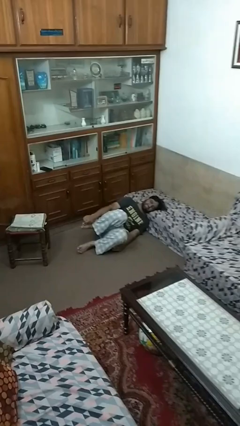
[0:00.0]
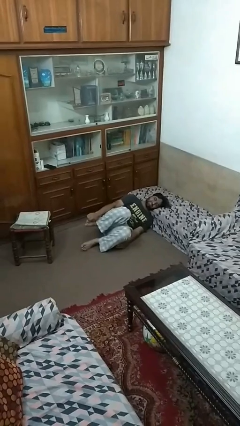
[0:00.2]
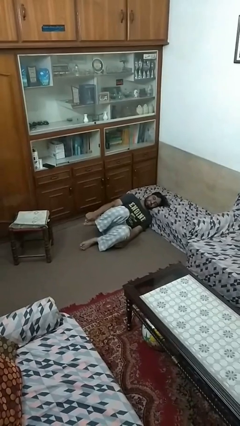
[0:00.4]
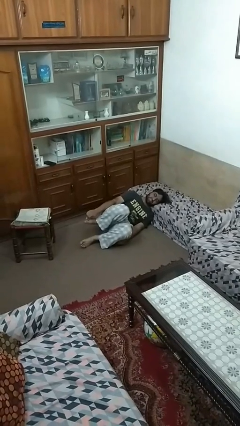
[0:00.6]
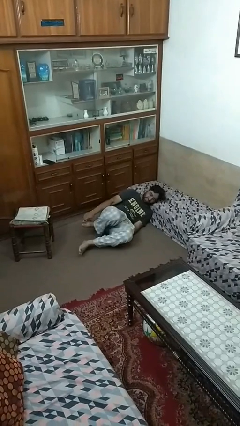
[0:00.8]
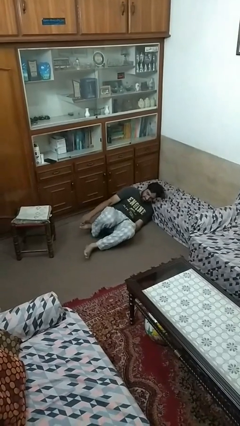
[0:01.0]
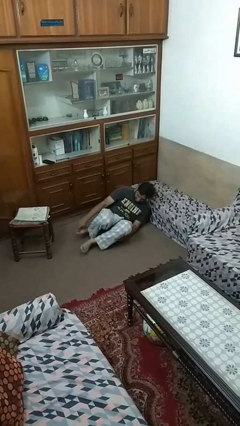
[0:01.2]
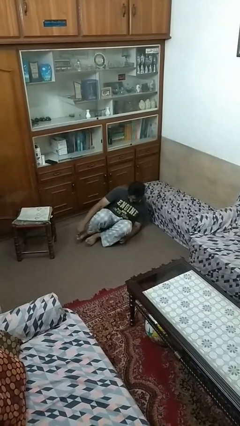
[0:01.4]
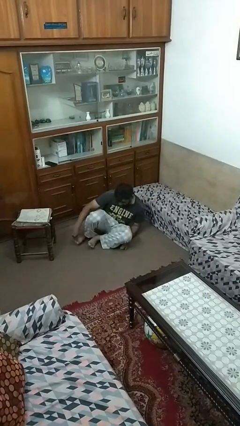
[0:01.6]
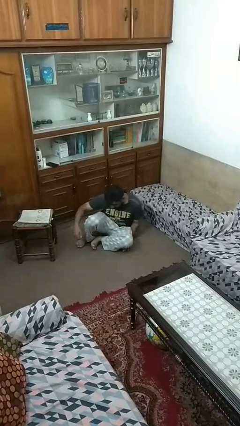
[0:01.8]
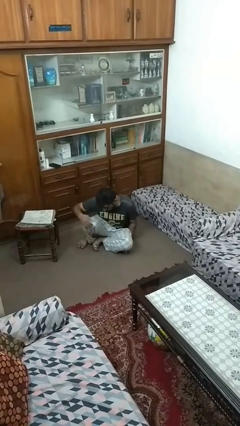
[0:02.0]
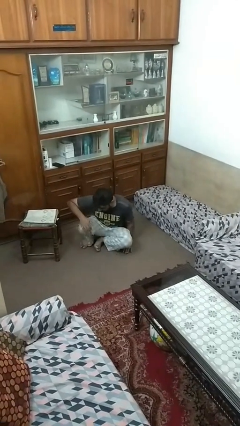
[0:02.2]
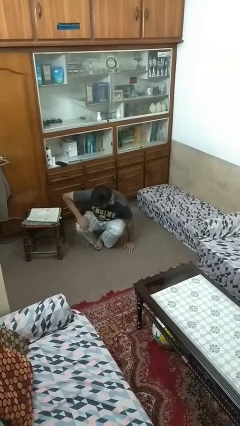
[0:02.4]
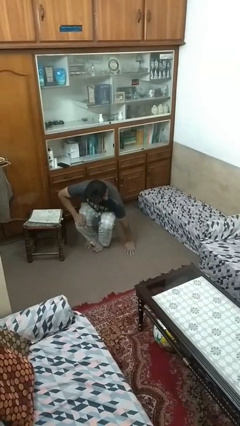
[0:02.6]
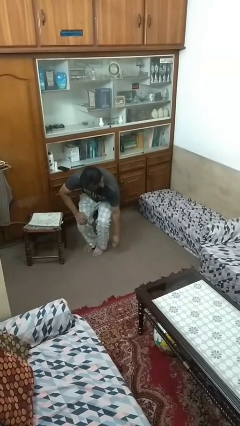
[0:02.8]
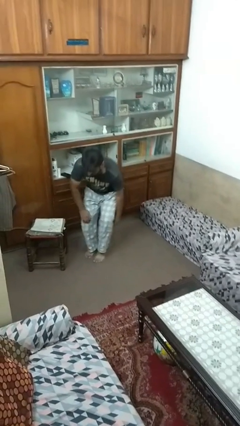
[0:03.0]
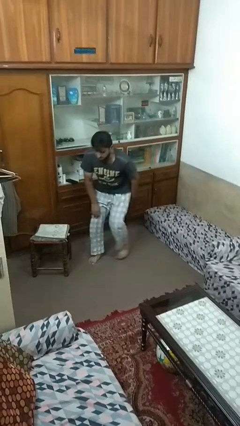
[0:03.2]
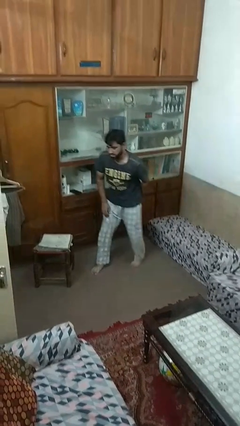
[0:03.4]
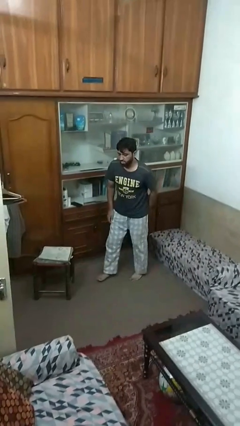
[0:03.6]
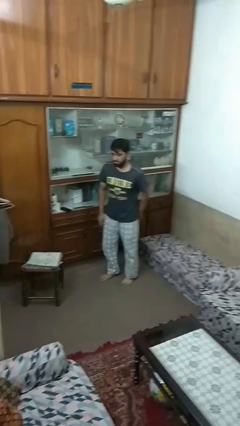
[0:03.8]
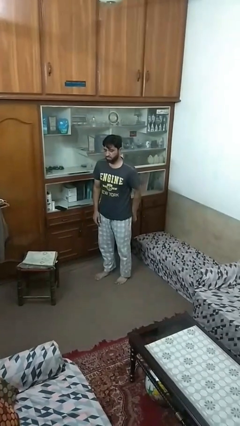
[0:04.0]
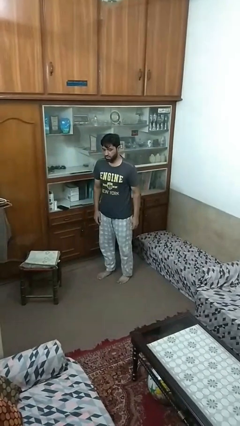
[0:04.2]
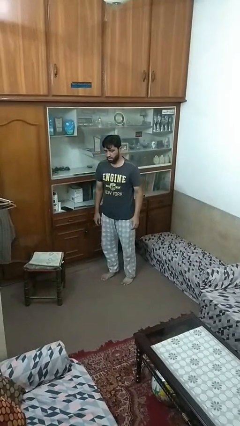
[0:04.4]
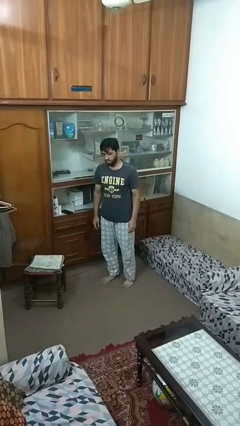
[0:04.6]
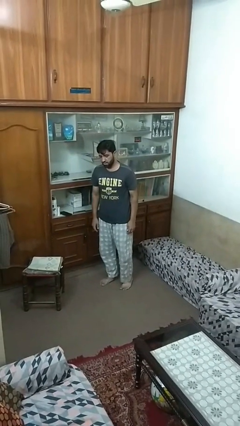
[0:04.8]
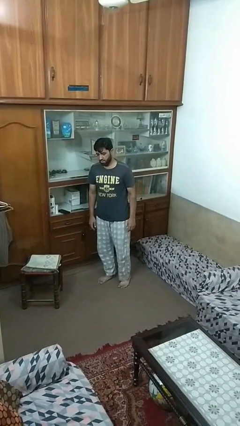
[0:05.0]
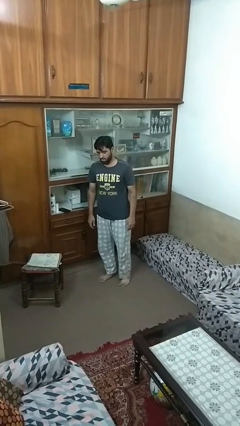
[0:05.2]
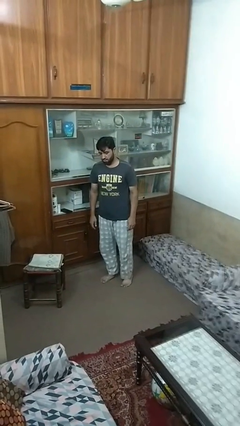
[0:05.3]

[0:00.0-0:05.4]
person stands up from floor

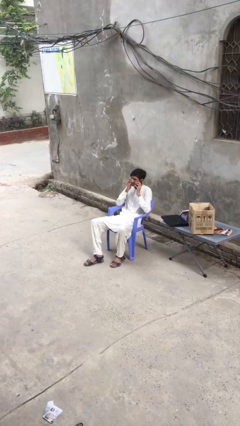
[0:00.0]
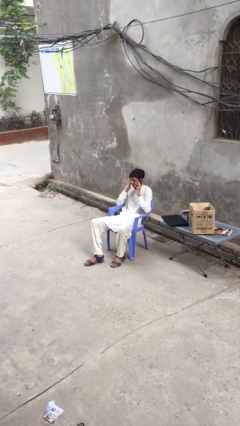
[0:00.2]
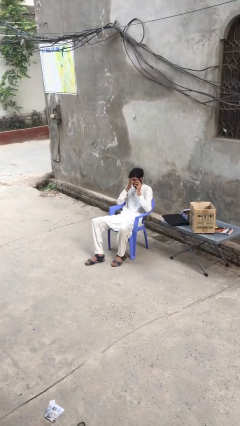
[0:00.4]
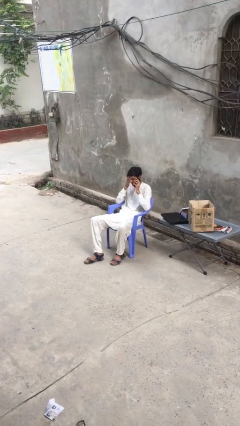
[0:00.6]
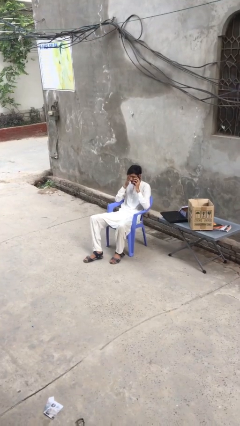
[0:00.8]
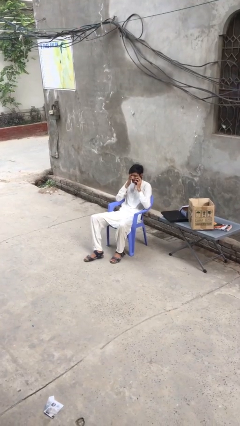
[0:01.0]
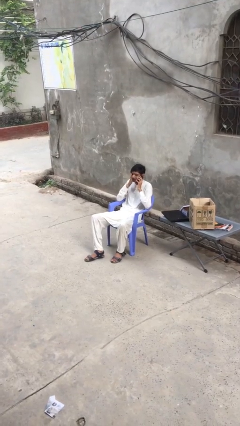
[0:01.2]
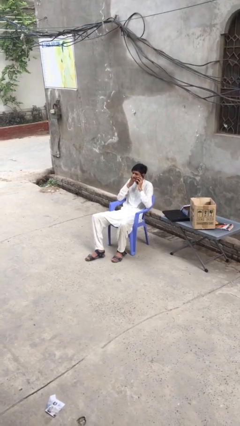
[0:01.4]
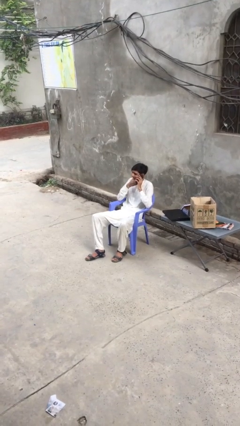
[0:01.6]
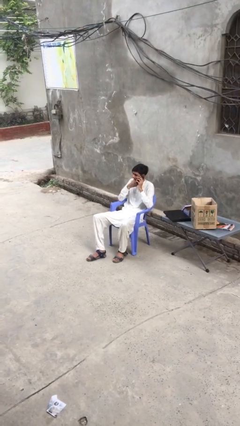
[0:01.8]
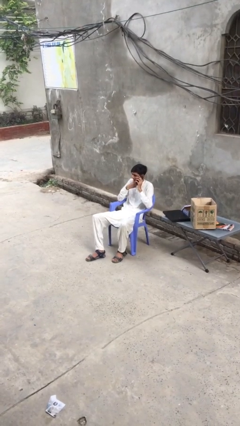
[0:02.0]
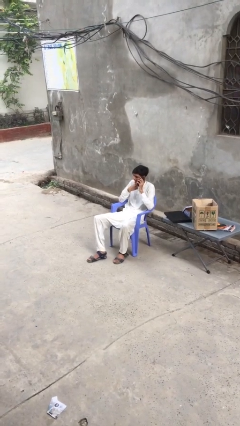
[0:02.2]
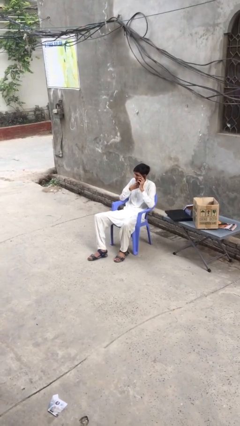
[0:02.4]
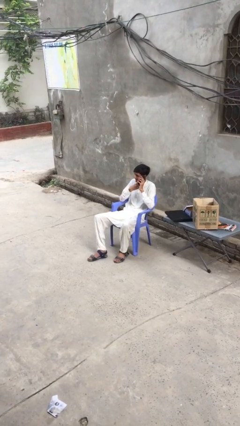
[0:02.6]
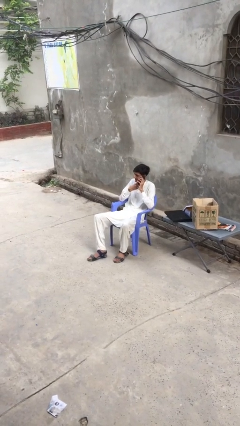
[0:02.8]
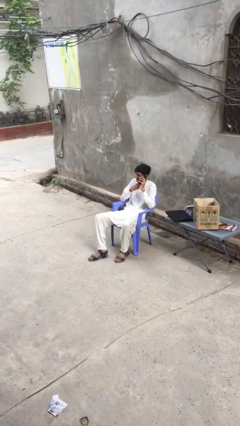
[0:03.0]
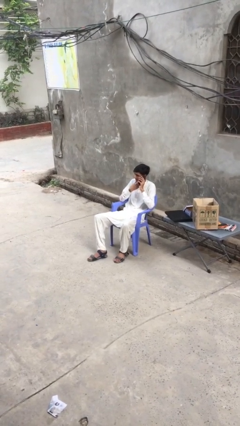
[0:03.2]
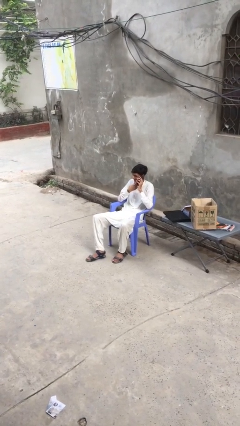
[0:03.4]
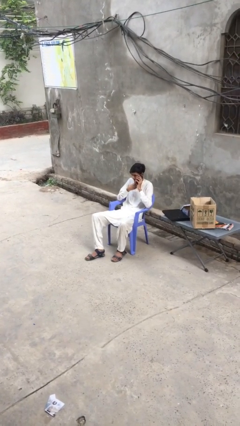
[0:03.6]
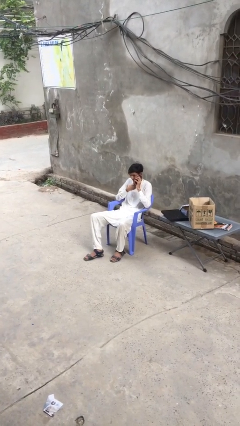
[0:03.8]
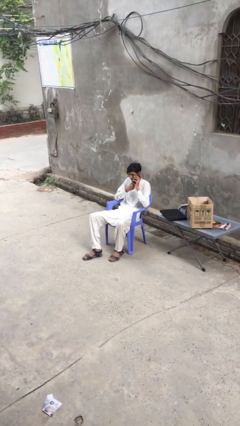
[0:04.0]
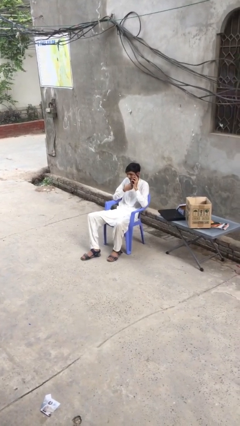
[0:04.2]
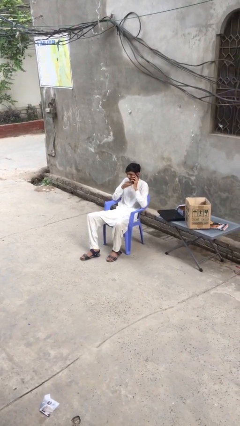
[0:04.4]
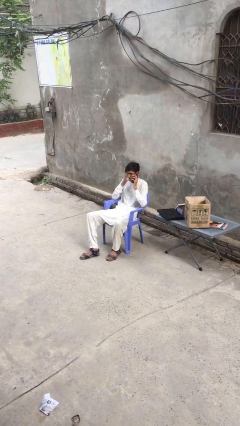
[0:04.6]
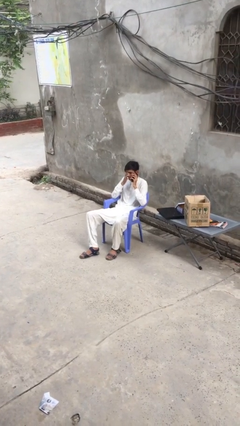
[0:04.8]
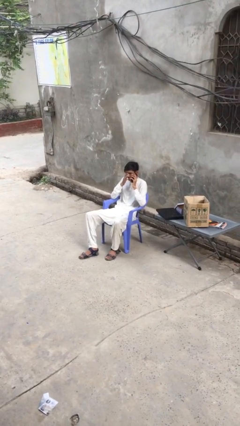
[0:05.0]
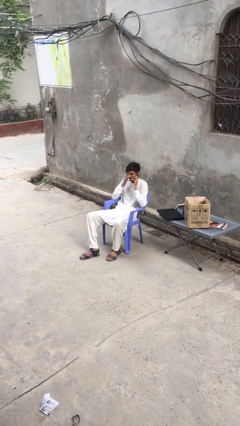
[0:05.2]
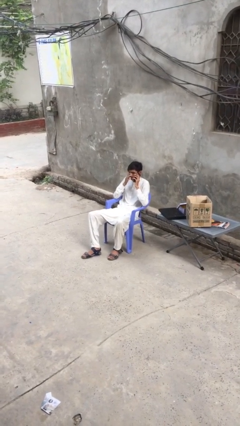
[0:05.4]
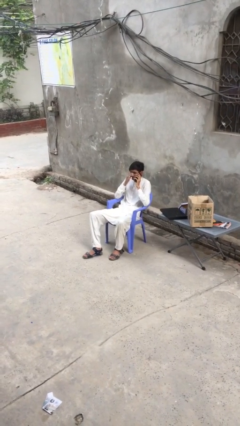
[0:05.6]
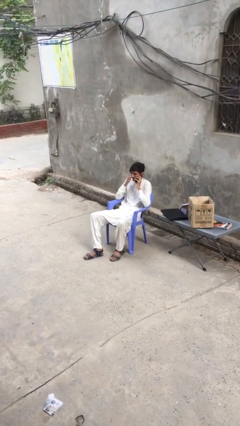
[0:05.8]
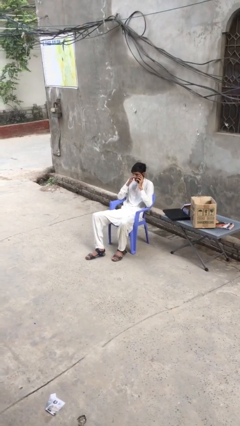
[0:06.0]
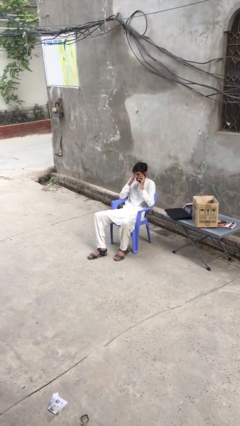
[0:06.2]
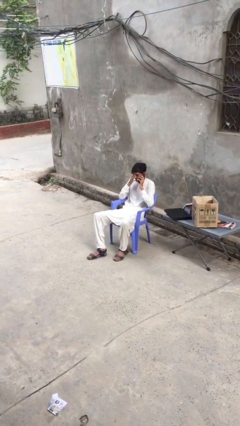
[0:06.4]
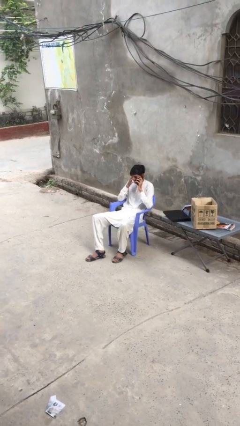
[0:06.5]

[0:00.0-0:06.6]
person talks on phone

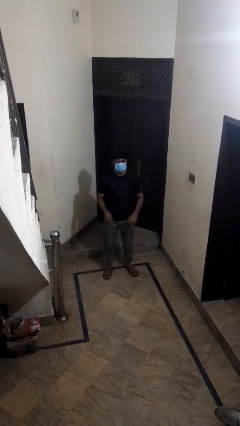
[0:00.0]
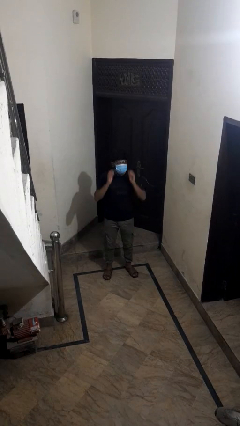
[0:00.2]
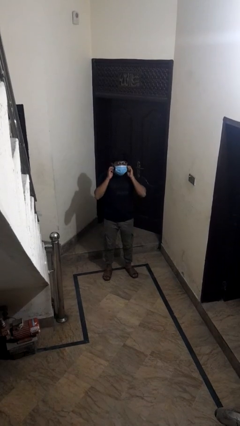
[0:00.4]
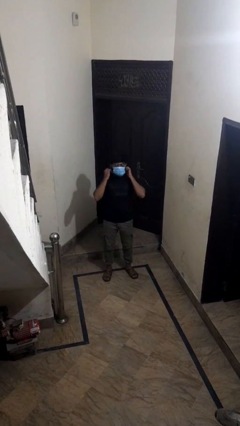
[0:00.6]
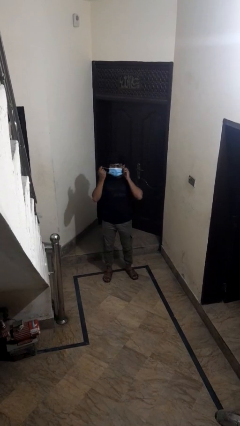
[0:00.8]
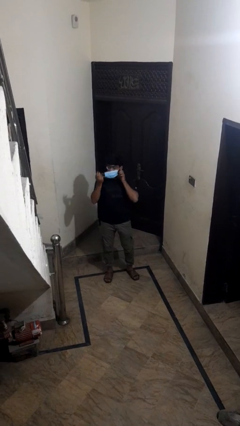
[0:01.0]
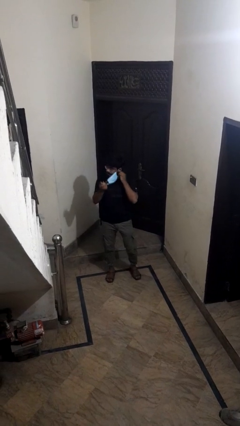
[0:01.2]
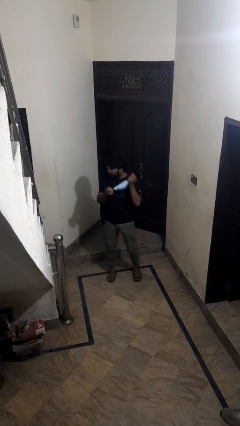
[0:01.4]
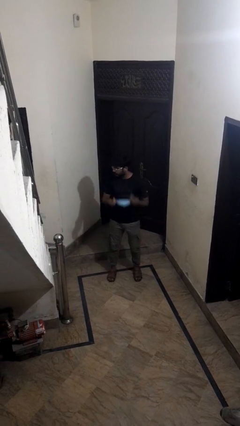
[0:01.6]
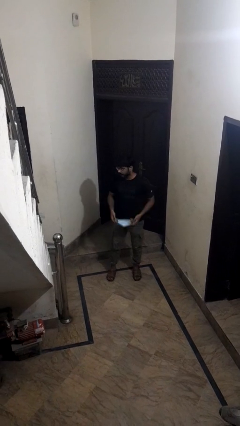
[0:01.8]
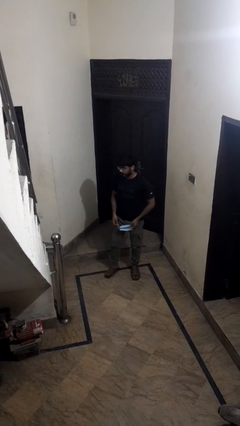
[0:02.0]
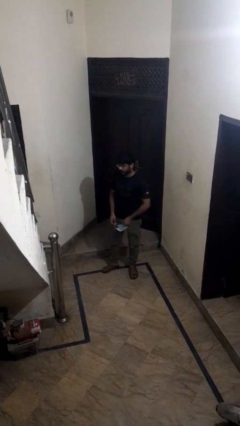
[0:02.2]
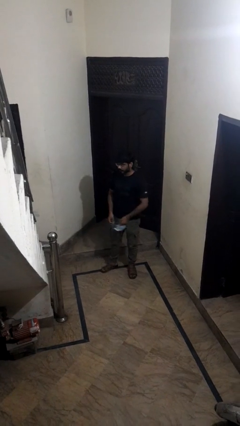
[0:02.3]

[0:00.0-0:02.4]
person takes off facemask

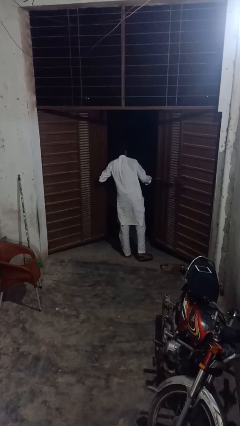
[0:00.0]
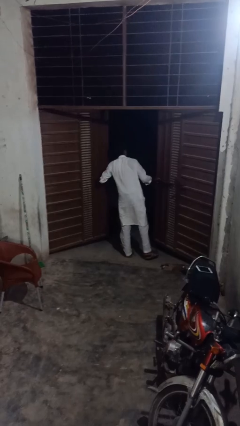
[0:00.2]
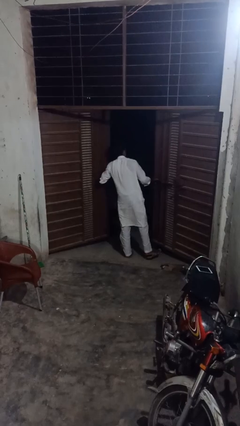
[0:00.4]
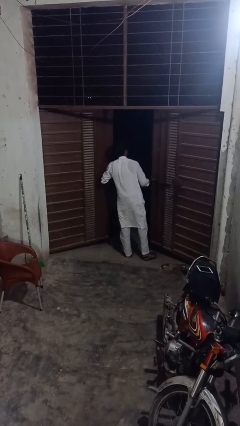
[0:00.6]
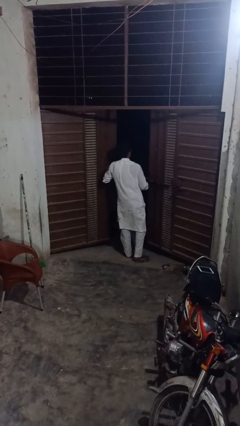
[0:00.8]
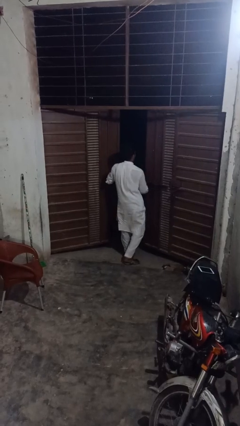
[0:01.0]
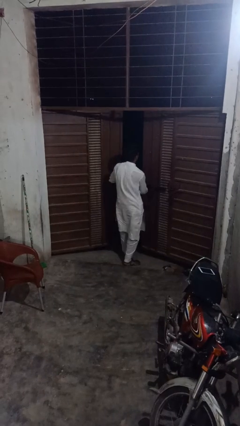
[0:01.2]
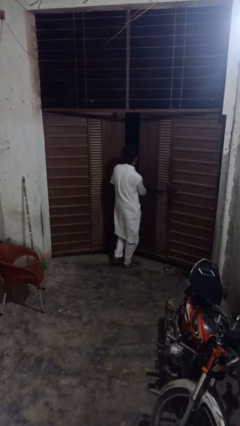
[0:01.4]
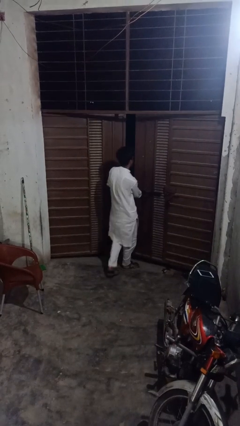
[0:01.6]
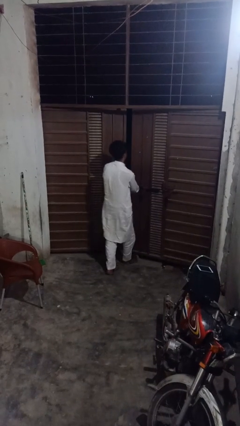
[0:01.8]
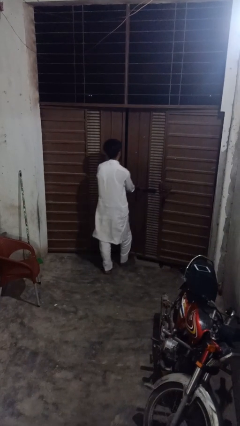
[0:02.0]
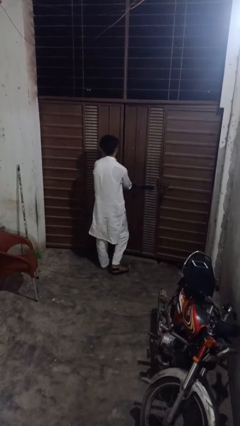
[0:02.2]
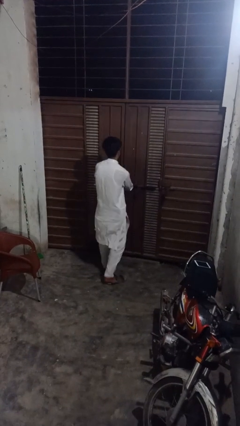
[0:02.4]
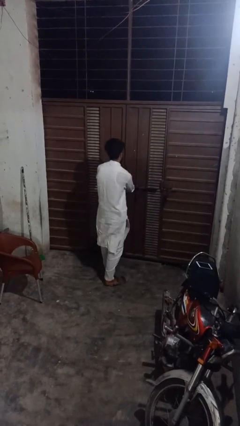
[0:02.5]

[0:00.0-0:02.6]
person closes gate

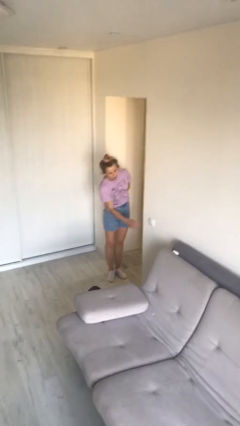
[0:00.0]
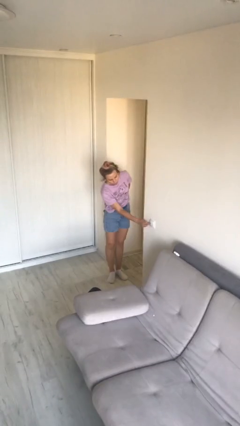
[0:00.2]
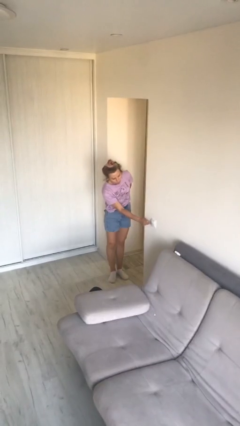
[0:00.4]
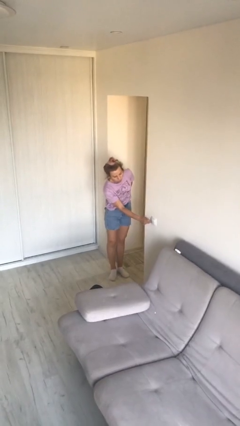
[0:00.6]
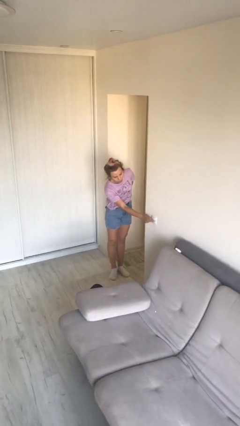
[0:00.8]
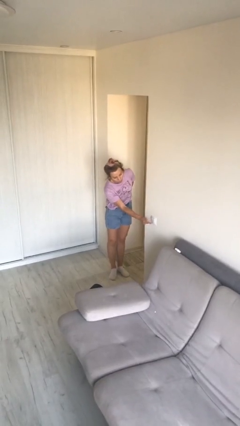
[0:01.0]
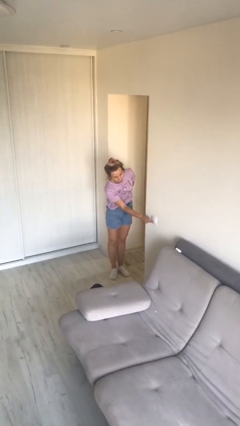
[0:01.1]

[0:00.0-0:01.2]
person taps object with finger
